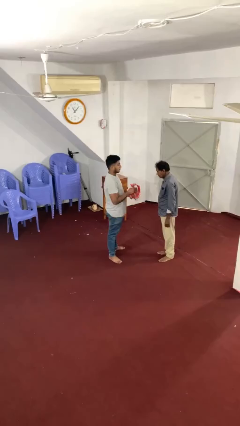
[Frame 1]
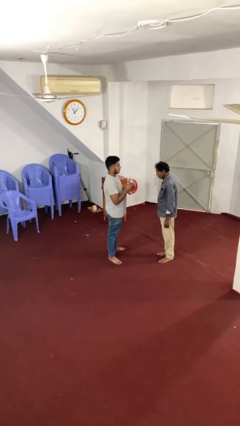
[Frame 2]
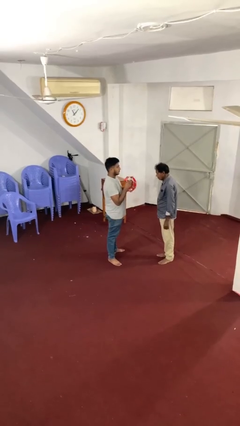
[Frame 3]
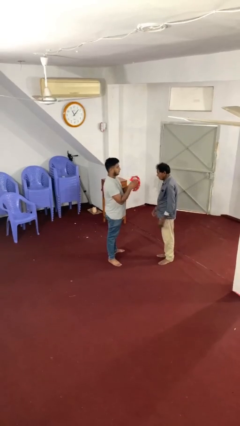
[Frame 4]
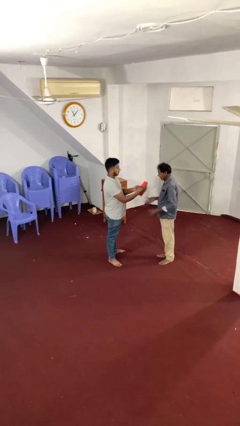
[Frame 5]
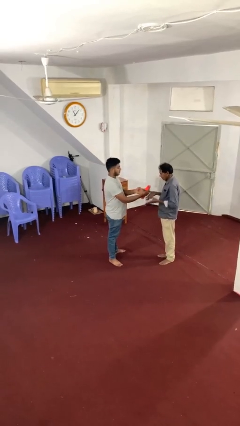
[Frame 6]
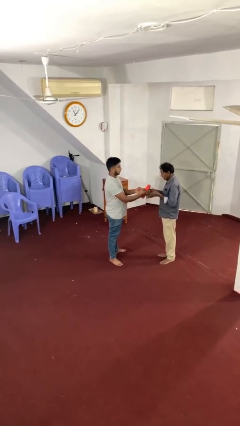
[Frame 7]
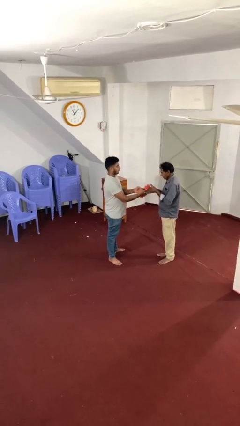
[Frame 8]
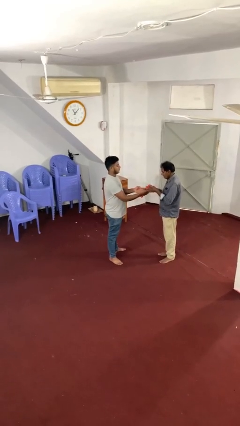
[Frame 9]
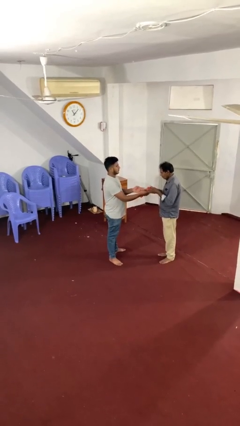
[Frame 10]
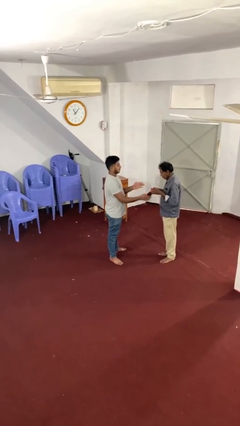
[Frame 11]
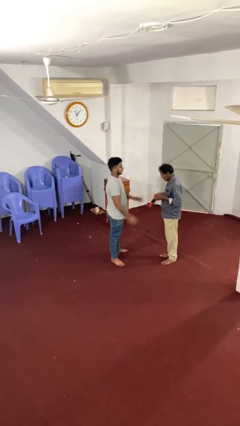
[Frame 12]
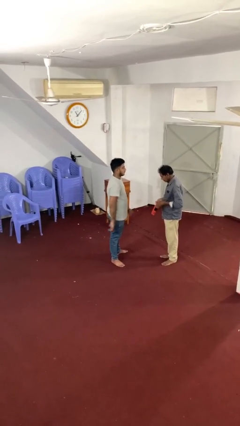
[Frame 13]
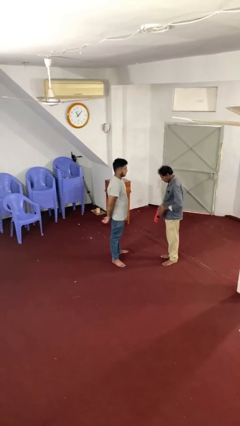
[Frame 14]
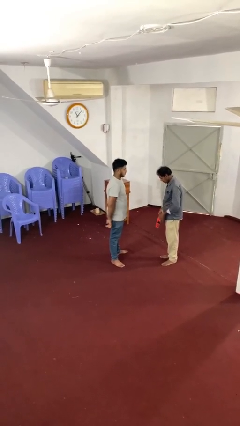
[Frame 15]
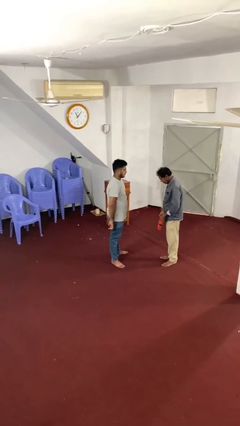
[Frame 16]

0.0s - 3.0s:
person transfers object to person

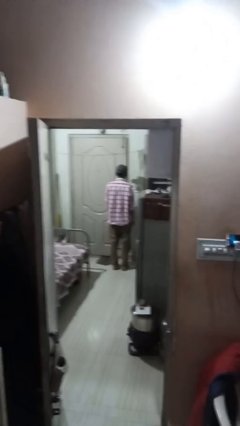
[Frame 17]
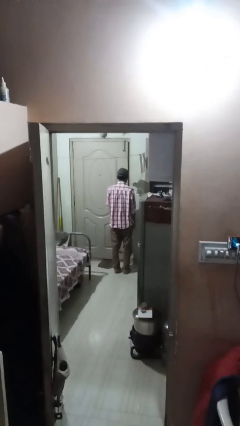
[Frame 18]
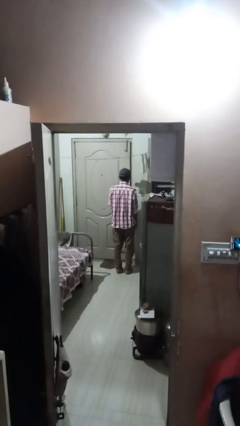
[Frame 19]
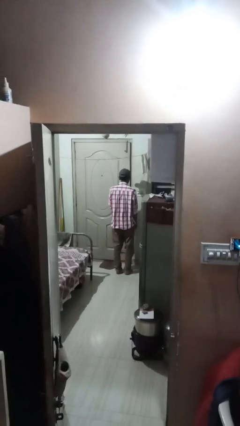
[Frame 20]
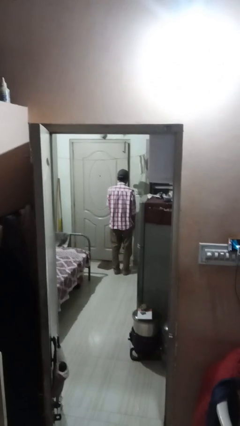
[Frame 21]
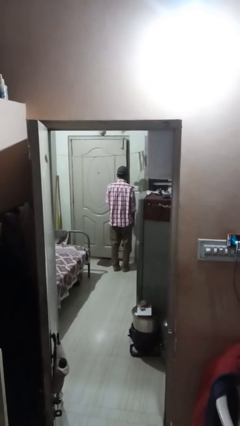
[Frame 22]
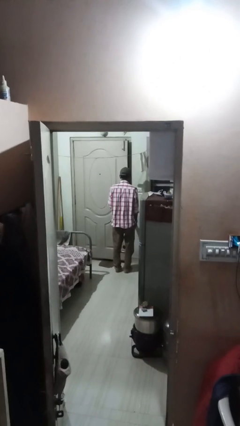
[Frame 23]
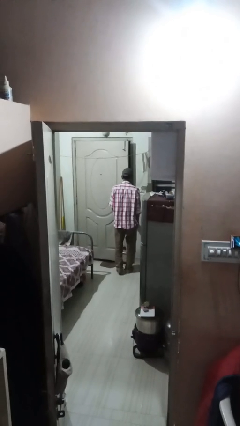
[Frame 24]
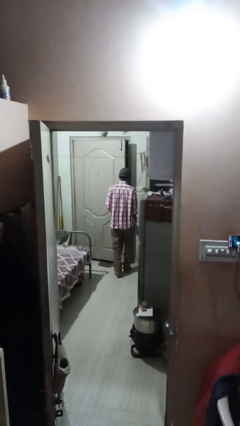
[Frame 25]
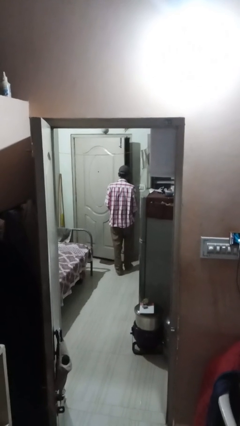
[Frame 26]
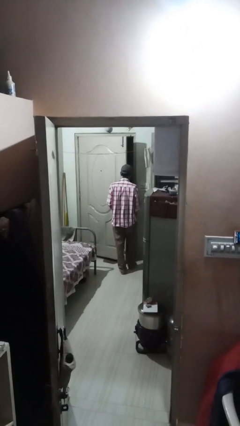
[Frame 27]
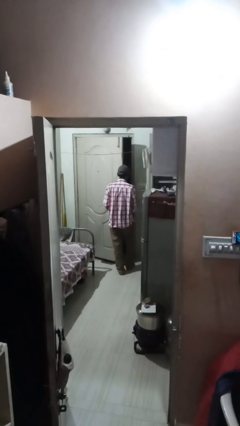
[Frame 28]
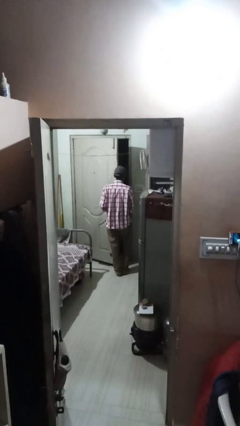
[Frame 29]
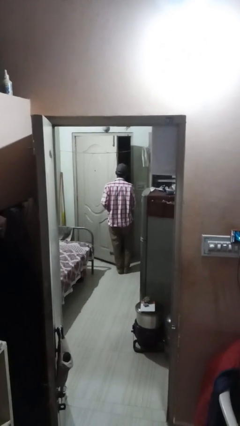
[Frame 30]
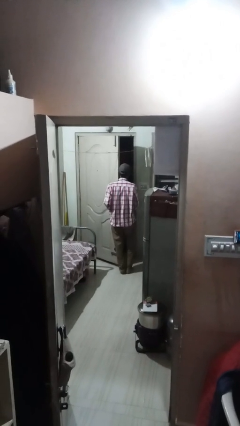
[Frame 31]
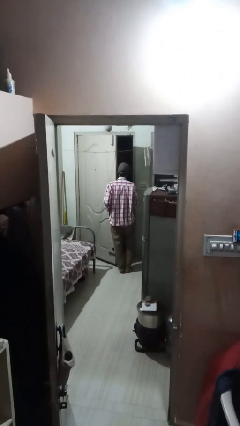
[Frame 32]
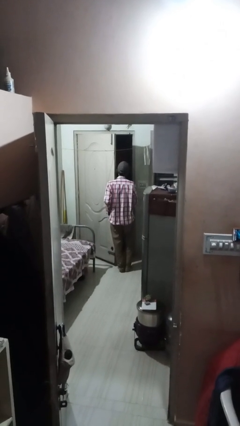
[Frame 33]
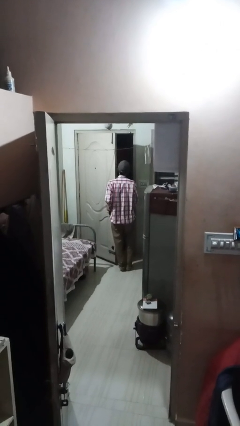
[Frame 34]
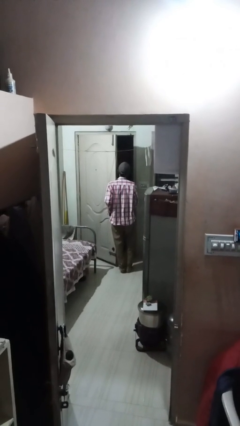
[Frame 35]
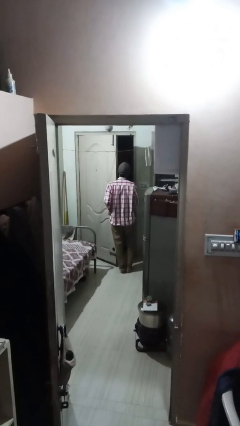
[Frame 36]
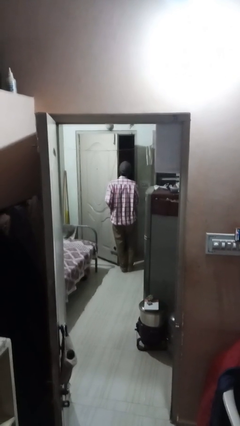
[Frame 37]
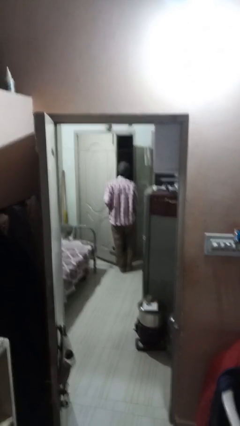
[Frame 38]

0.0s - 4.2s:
person opens facility door

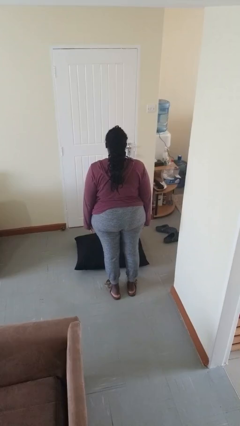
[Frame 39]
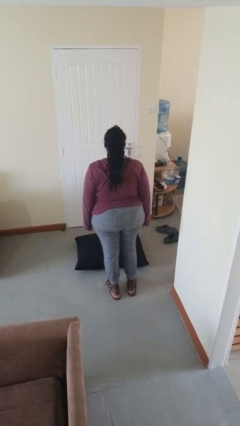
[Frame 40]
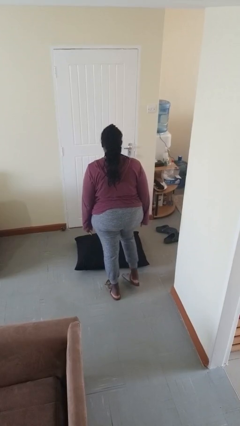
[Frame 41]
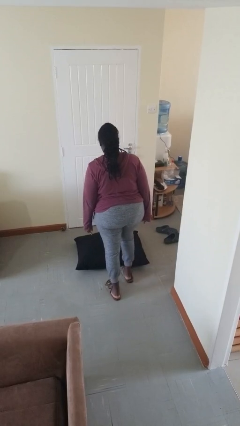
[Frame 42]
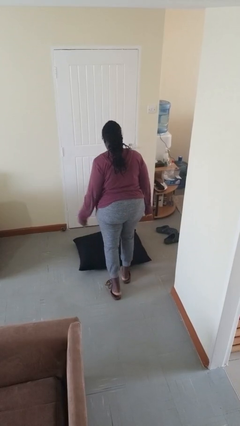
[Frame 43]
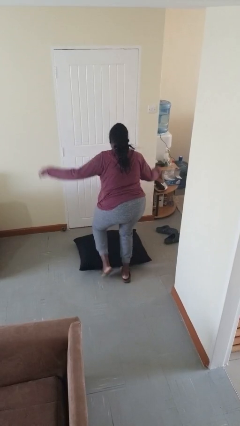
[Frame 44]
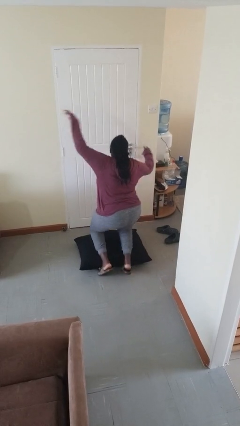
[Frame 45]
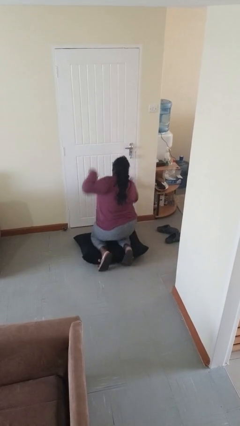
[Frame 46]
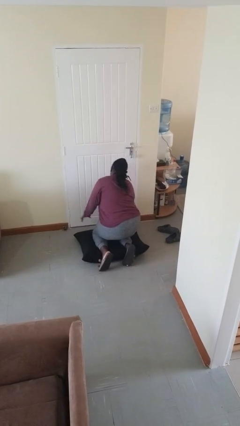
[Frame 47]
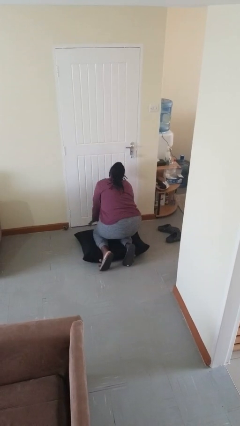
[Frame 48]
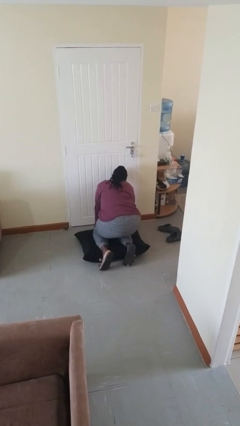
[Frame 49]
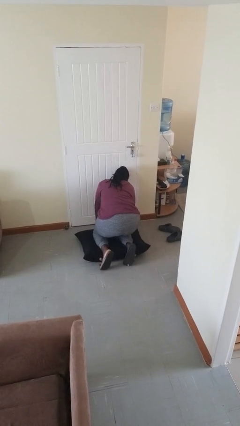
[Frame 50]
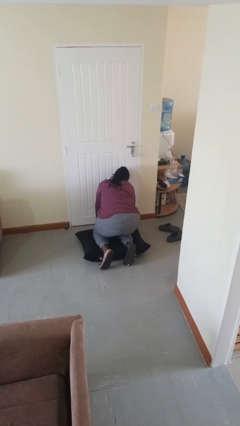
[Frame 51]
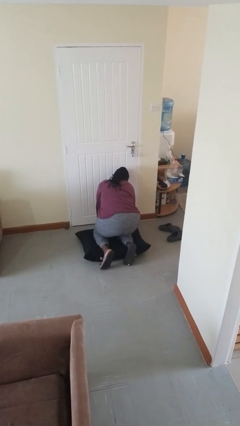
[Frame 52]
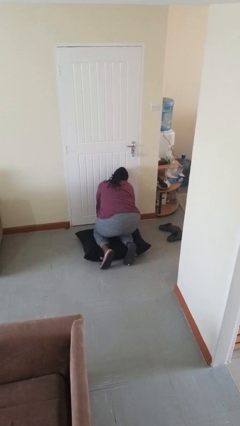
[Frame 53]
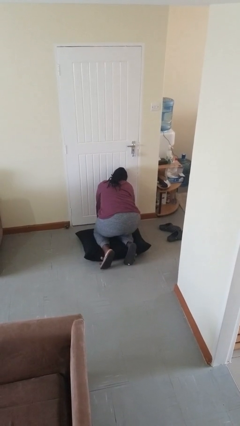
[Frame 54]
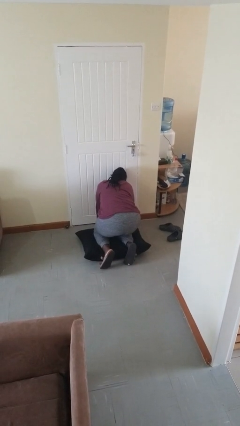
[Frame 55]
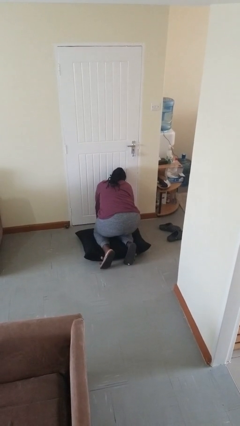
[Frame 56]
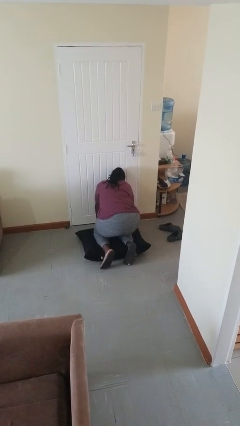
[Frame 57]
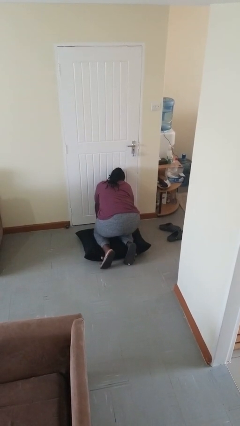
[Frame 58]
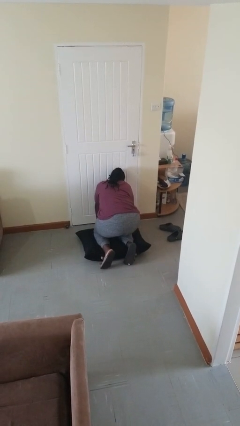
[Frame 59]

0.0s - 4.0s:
person trips on object on floor

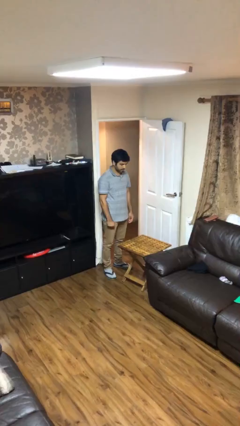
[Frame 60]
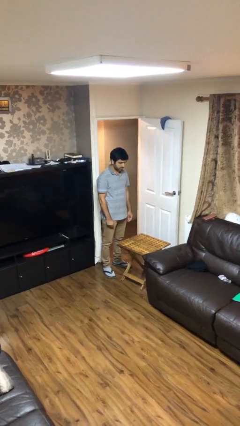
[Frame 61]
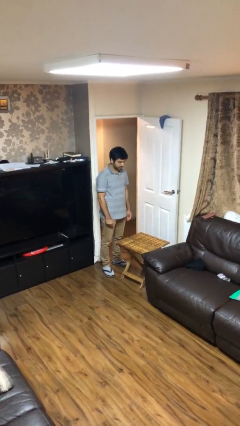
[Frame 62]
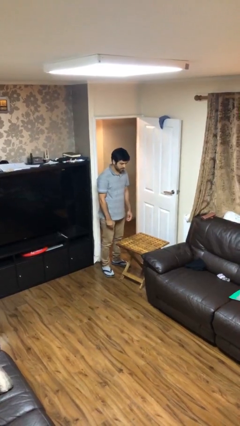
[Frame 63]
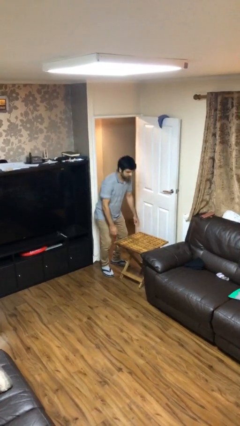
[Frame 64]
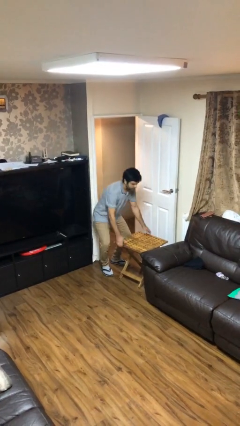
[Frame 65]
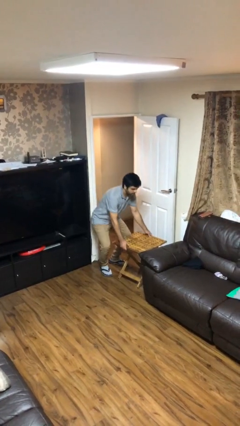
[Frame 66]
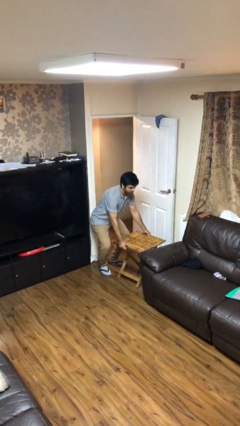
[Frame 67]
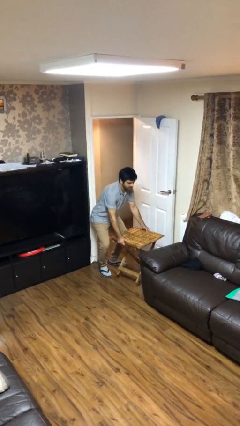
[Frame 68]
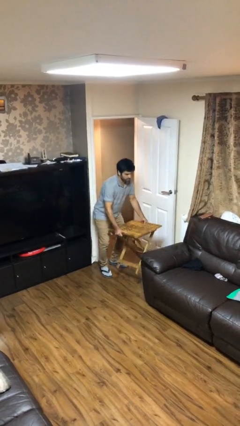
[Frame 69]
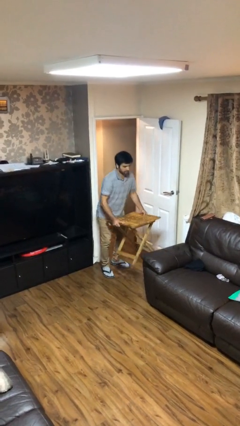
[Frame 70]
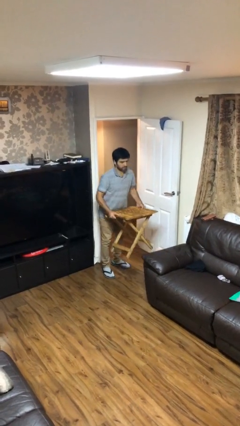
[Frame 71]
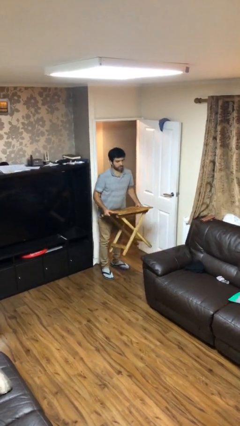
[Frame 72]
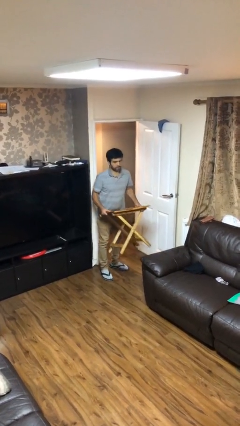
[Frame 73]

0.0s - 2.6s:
person picks up object from floor

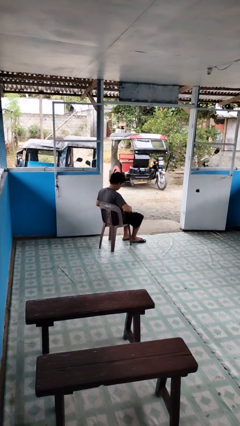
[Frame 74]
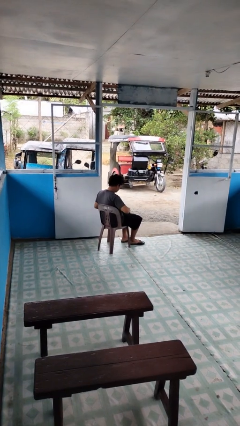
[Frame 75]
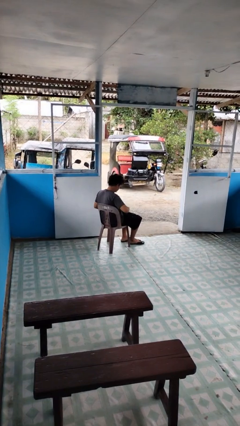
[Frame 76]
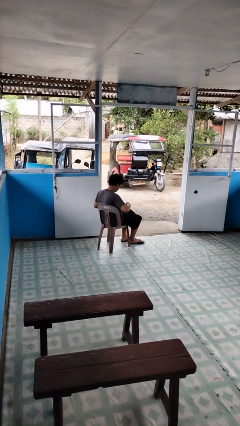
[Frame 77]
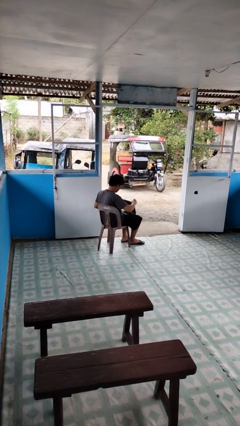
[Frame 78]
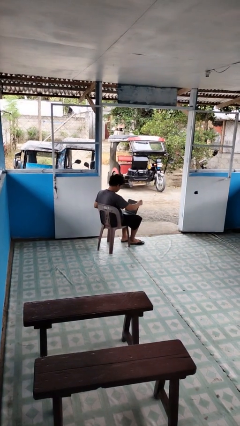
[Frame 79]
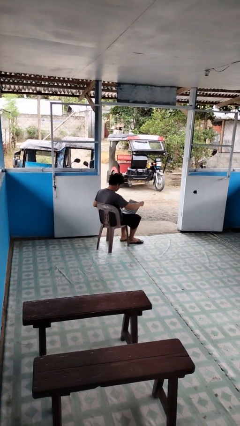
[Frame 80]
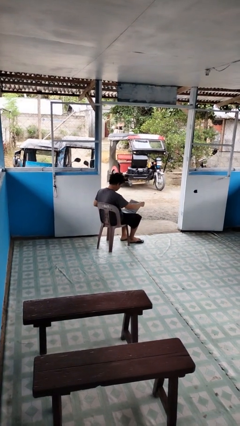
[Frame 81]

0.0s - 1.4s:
person opens laptop

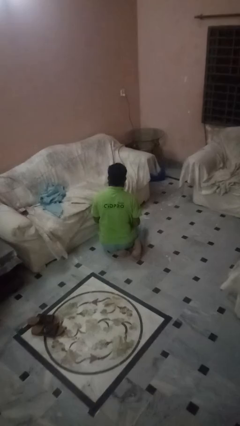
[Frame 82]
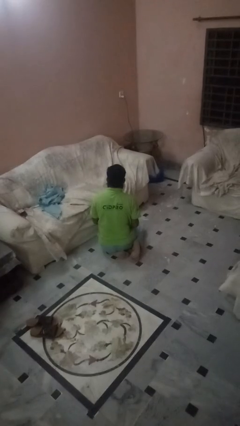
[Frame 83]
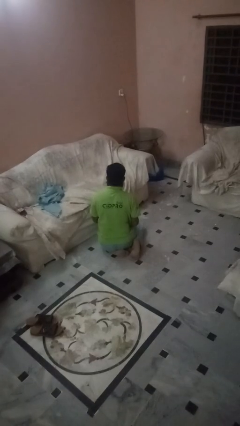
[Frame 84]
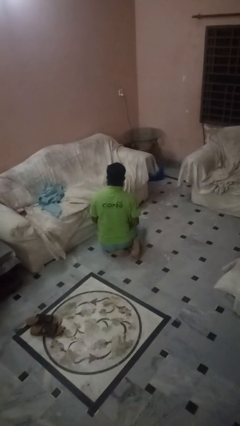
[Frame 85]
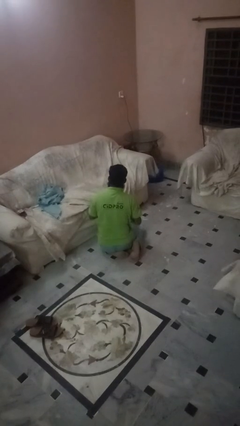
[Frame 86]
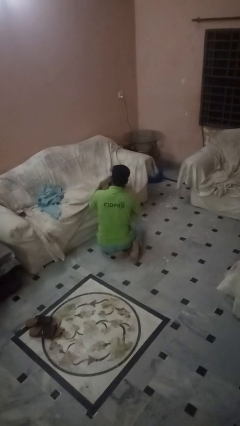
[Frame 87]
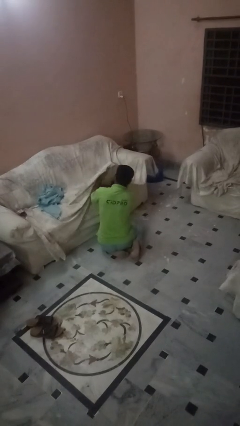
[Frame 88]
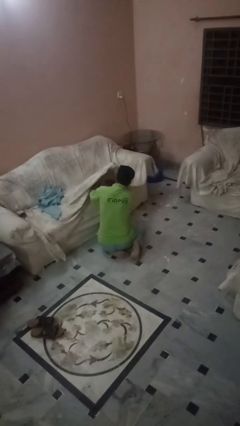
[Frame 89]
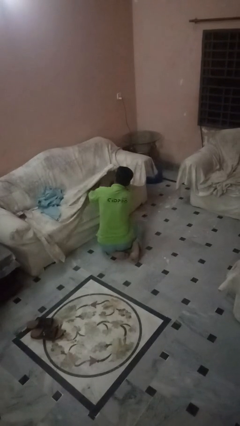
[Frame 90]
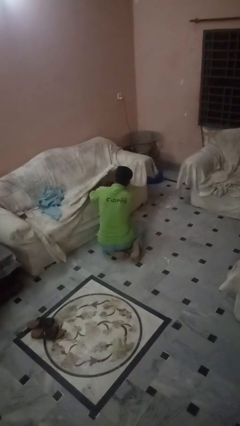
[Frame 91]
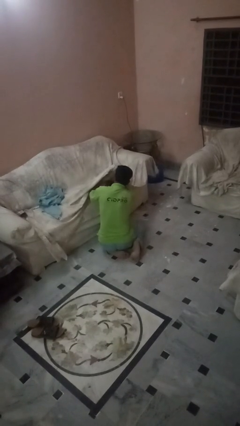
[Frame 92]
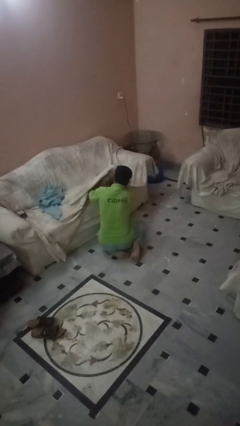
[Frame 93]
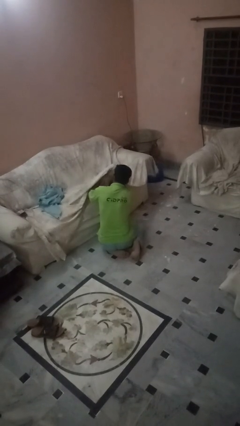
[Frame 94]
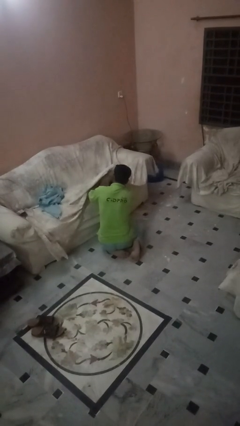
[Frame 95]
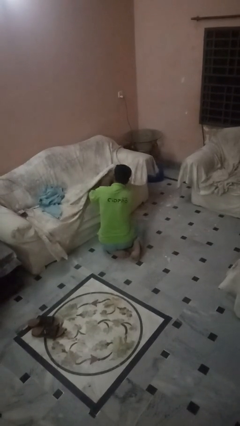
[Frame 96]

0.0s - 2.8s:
person searches in couch
